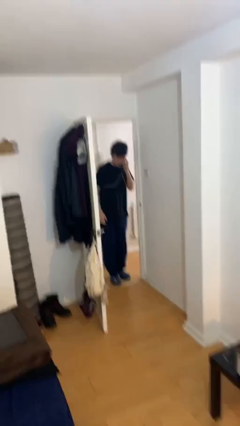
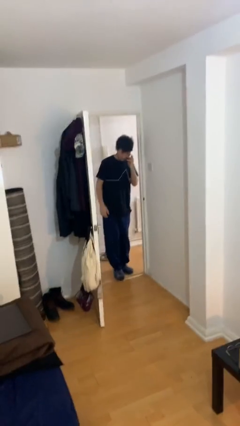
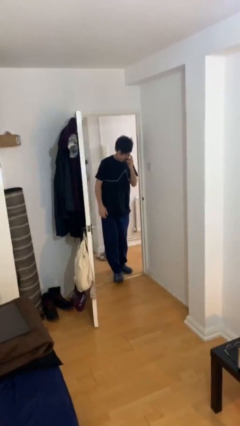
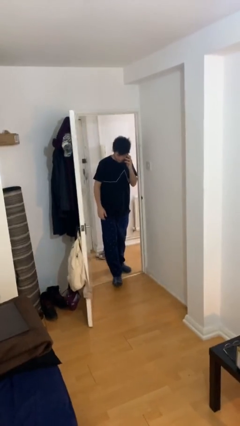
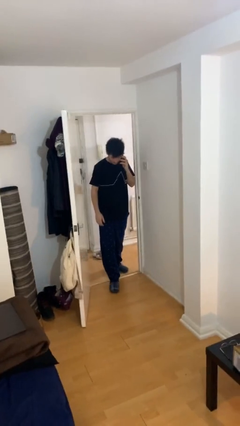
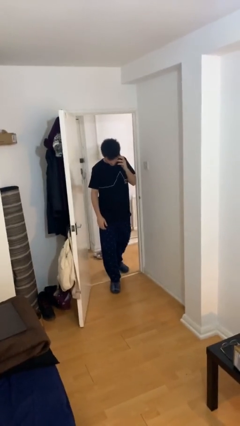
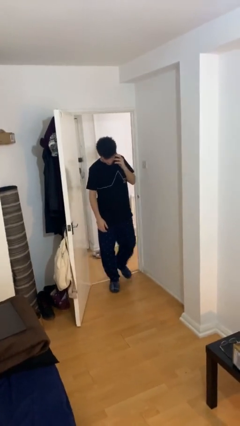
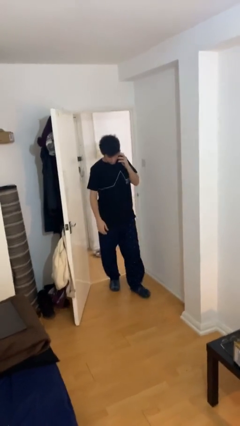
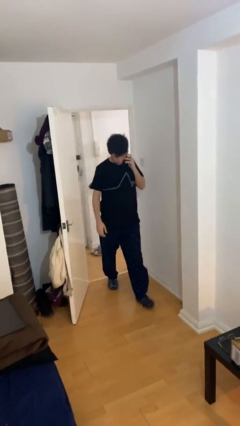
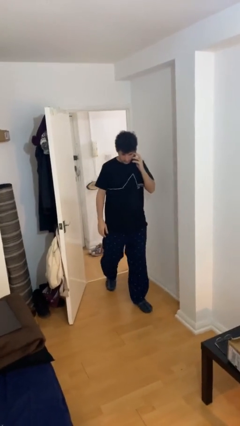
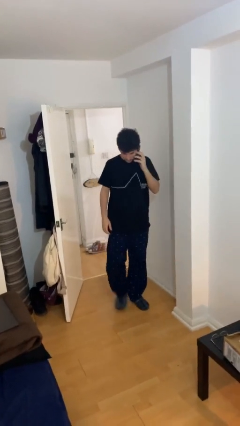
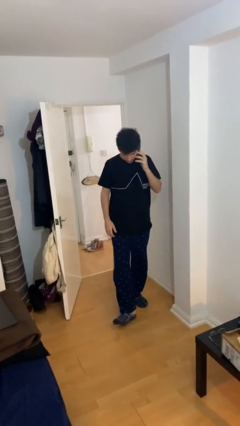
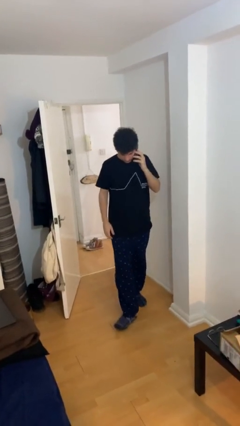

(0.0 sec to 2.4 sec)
person enters scene through structure

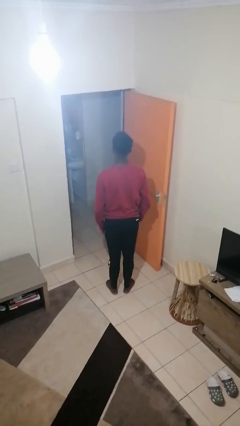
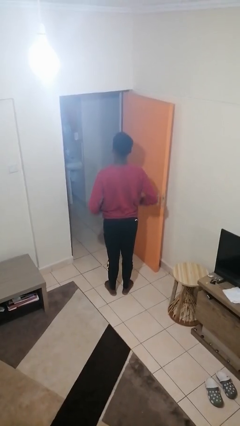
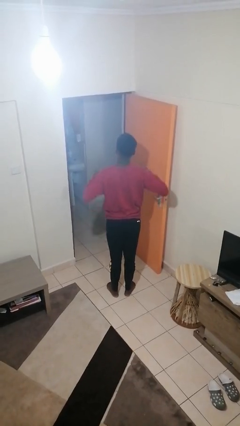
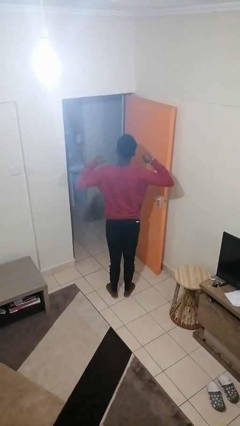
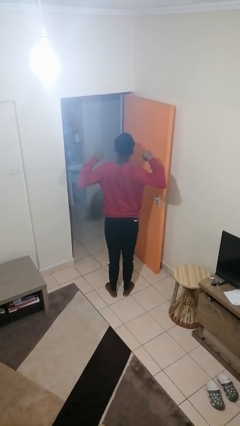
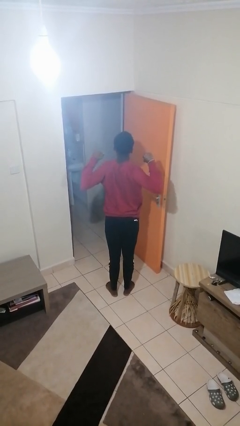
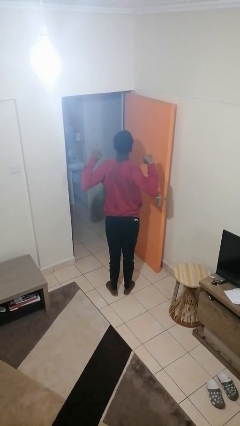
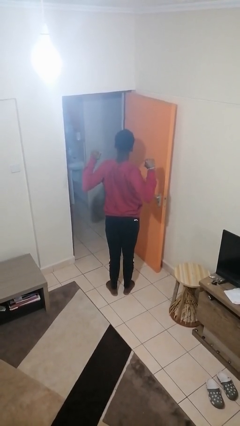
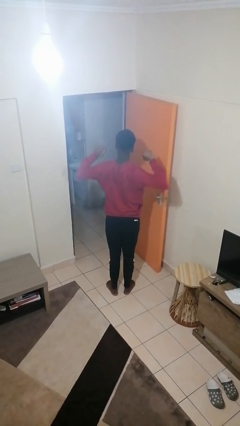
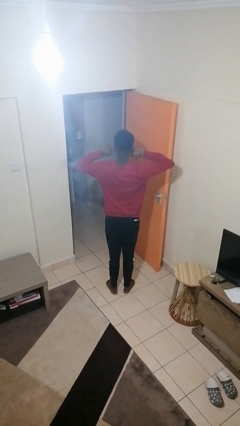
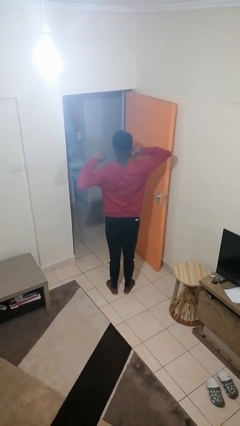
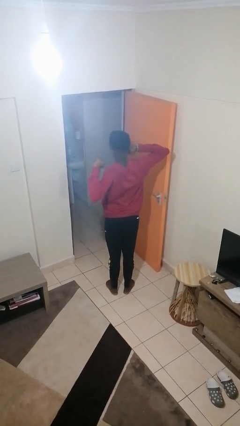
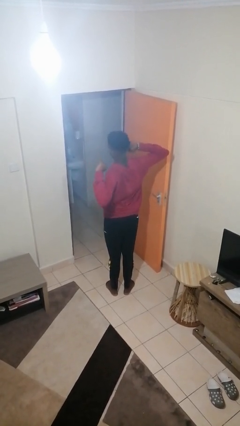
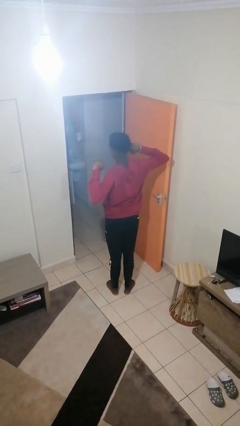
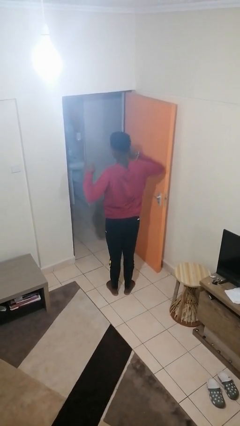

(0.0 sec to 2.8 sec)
person stretches arms to side

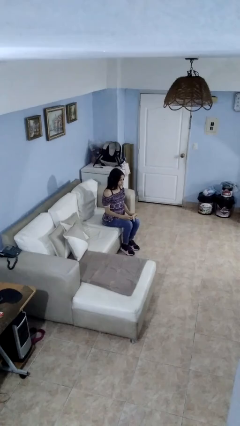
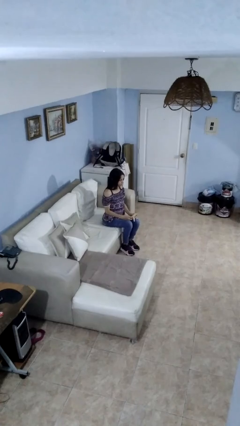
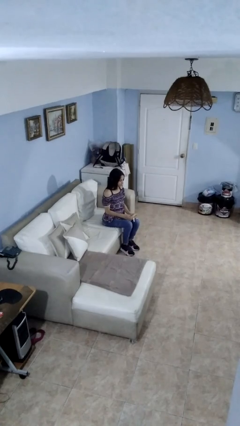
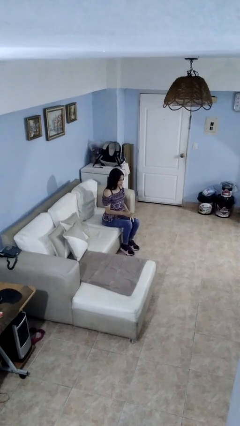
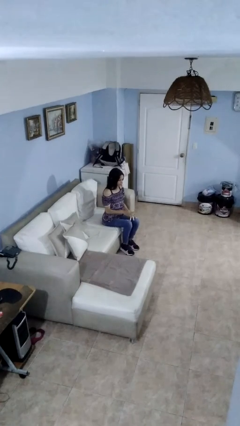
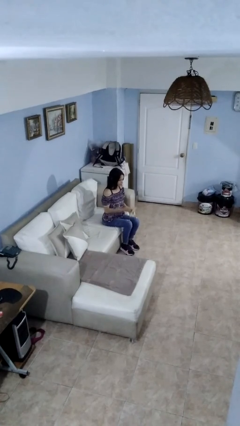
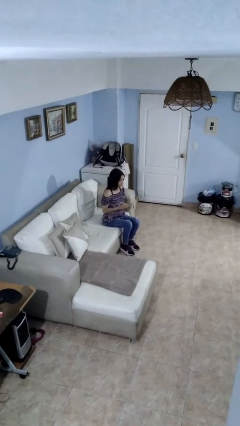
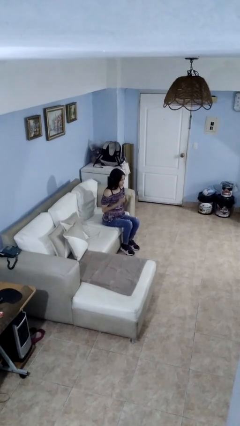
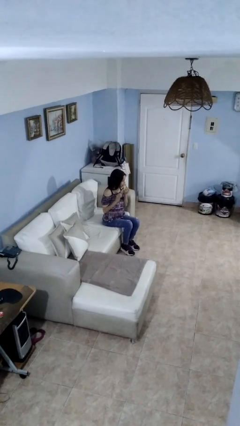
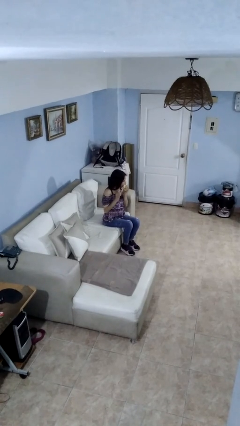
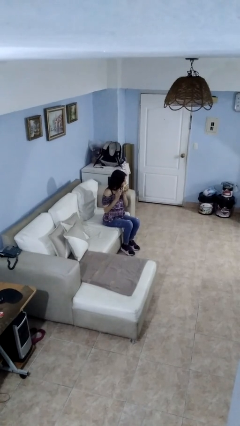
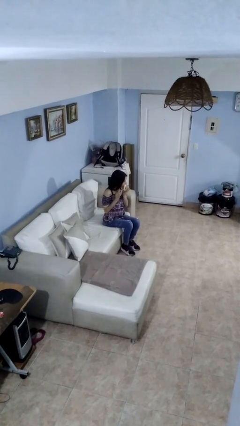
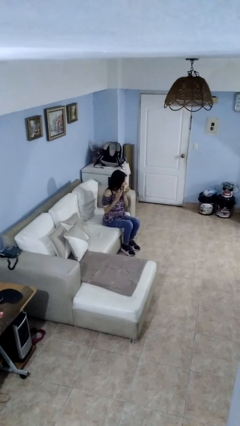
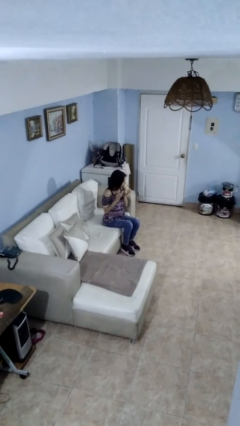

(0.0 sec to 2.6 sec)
person eats banana

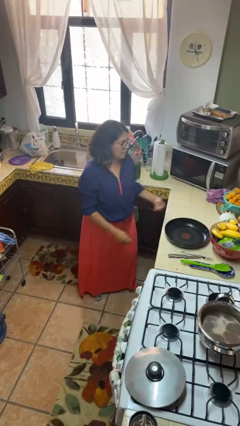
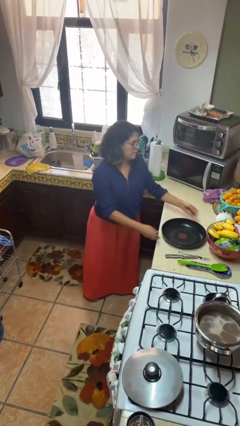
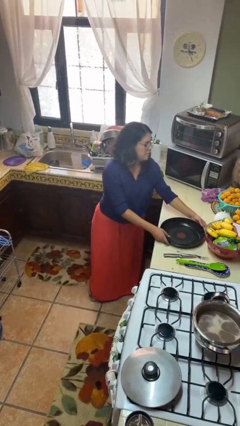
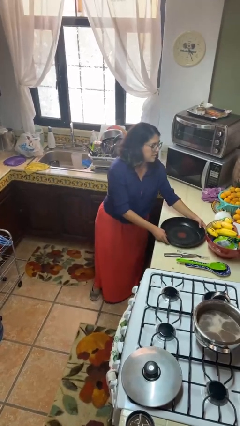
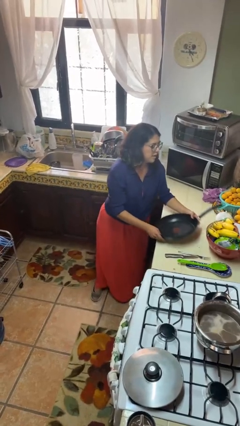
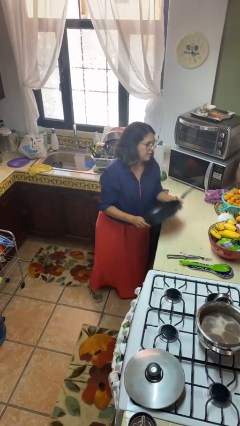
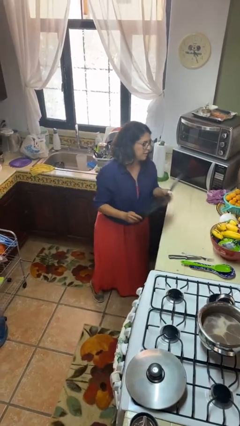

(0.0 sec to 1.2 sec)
person picks up object from countertop

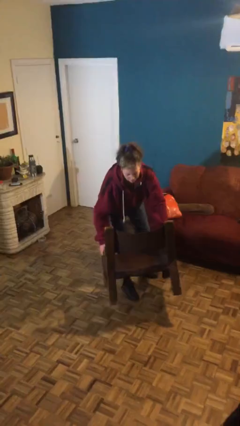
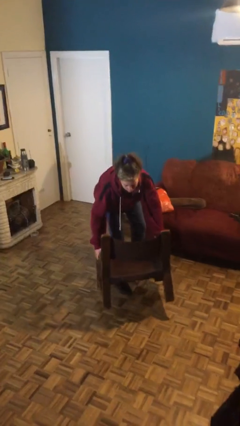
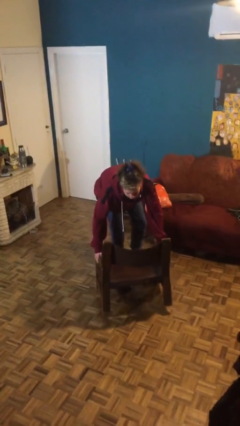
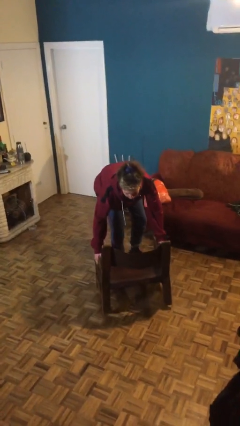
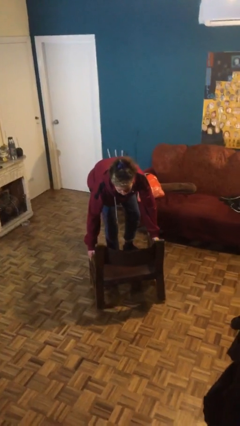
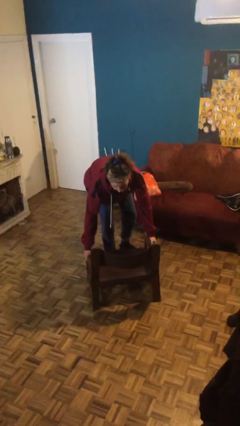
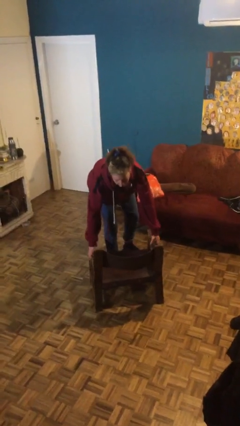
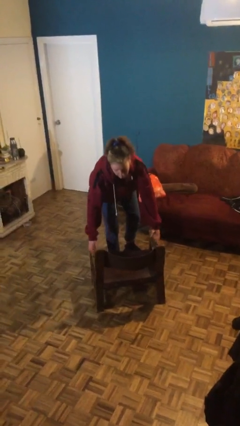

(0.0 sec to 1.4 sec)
person puts down object on floor

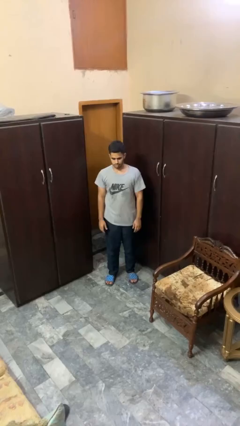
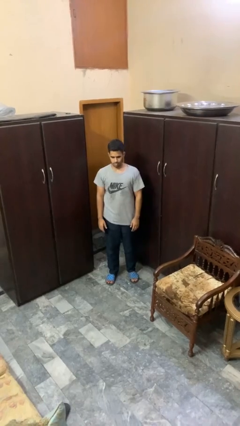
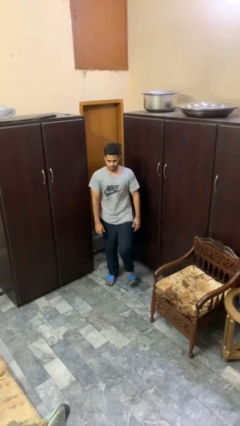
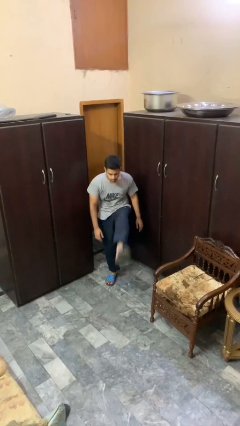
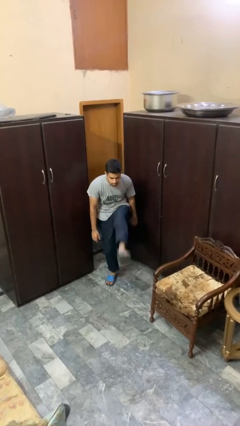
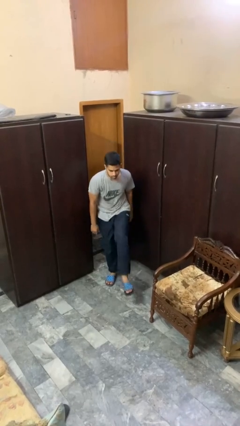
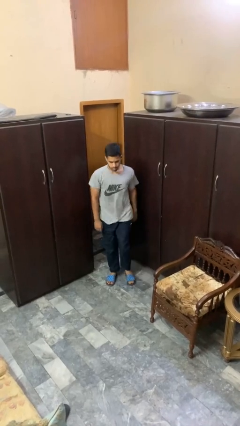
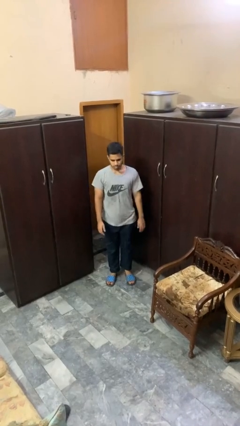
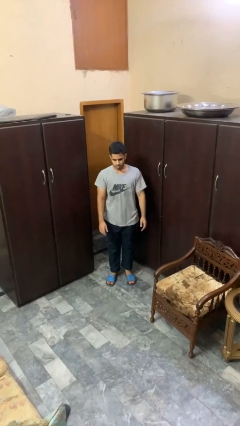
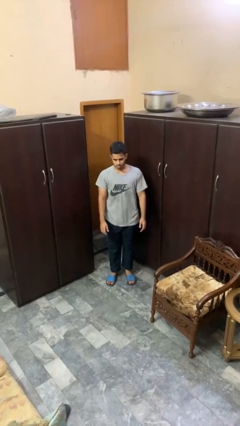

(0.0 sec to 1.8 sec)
person karate kicks

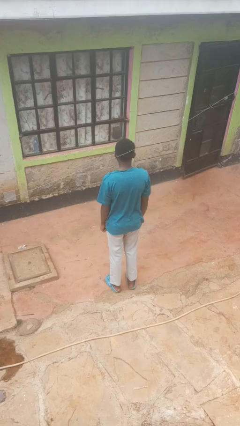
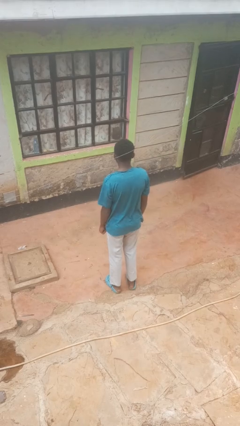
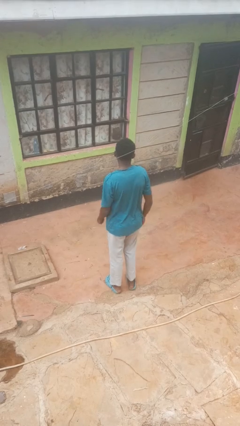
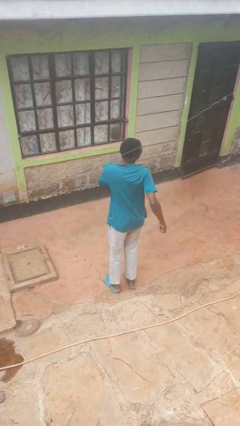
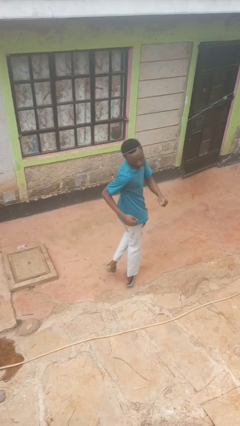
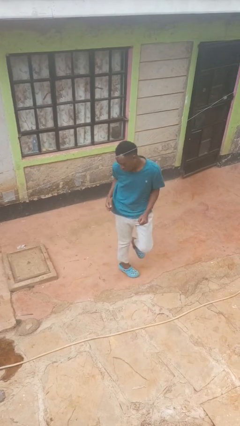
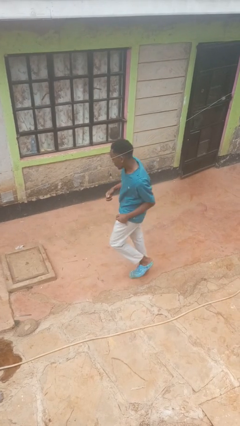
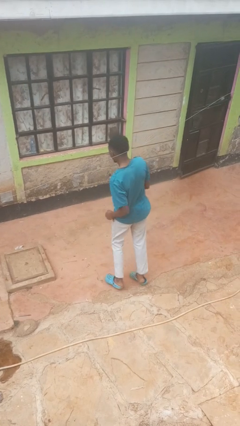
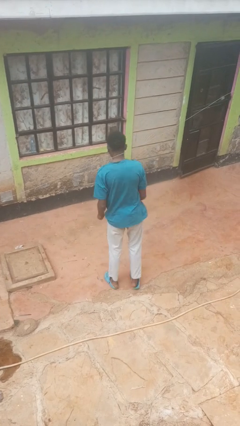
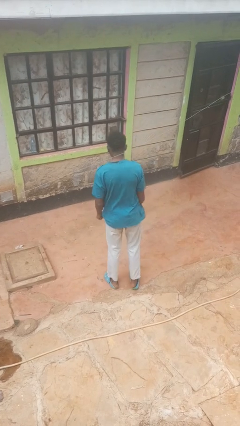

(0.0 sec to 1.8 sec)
person twirls

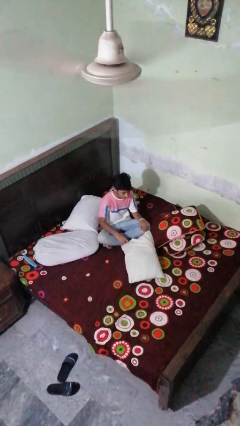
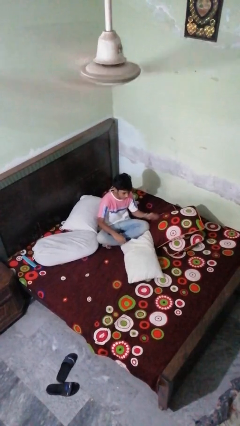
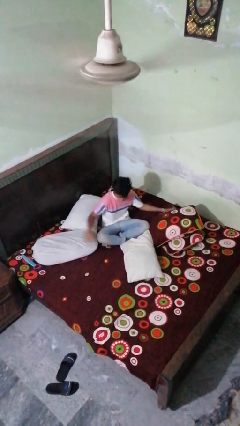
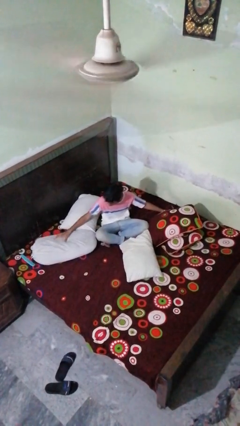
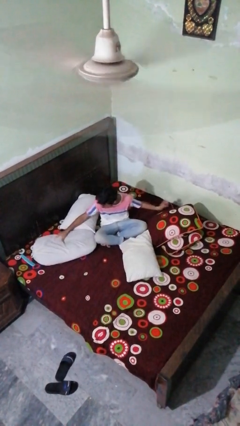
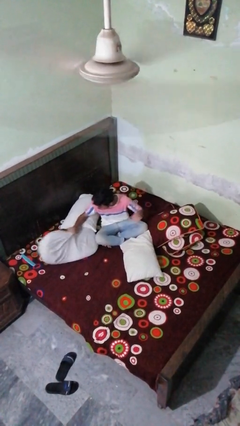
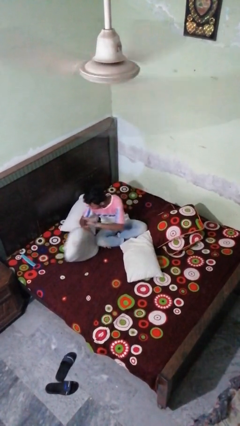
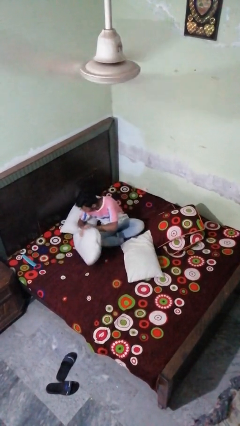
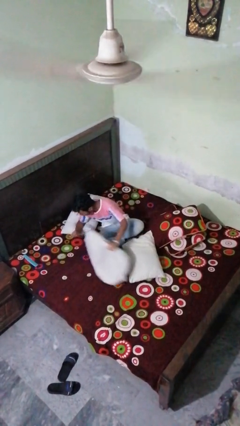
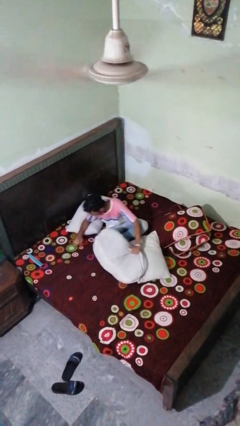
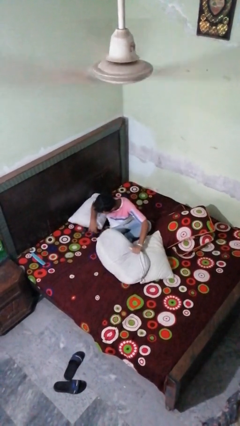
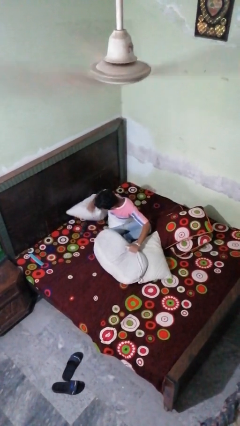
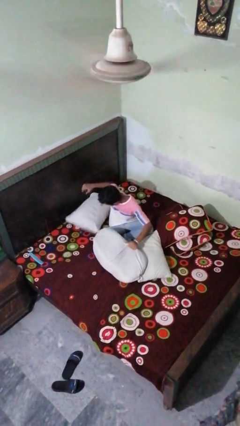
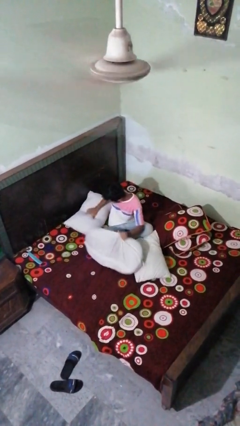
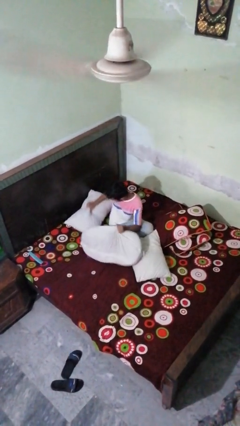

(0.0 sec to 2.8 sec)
person searches under bed

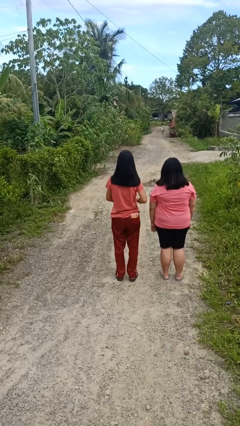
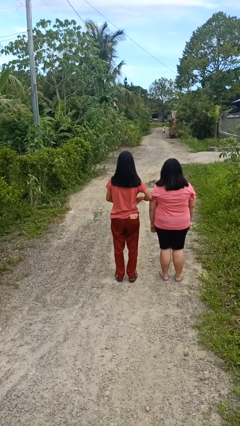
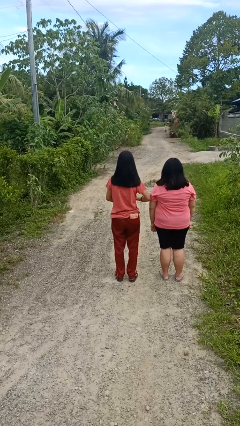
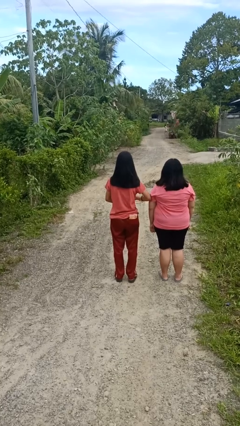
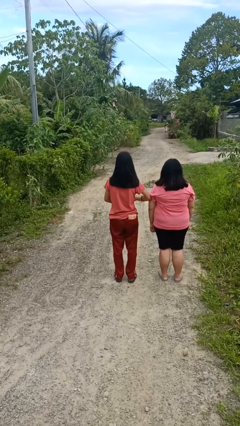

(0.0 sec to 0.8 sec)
person nudges person with elbow
